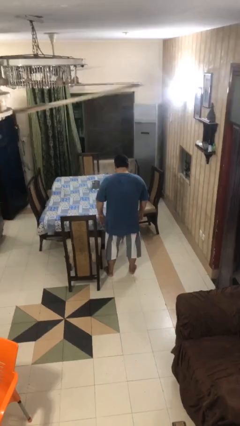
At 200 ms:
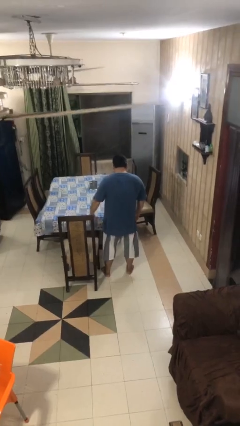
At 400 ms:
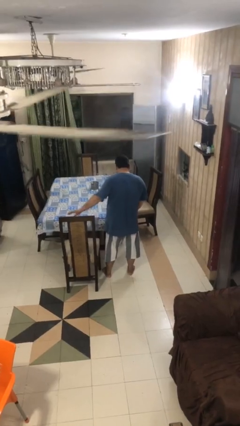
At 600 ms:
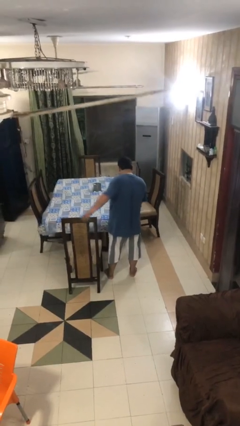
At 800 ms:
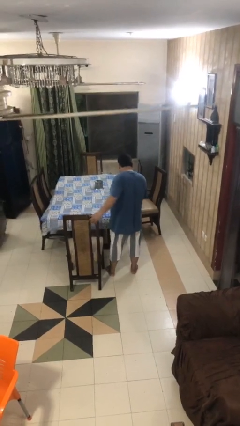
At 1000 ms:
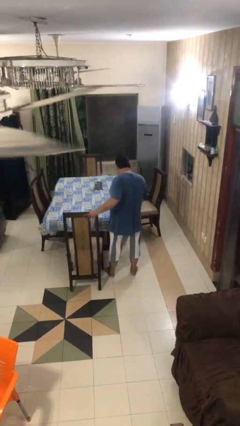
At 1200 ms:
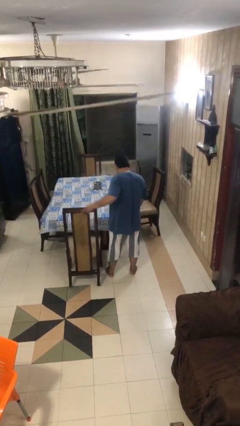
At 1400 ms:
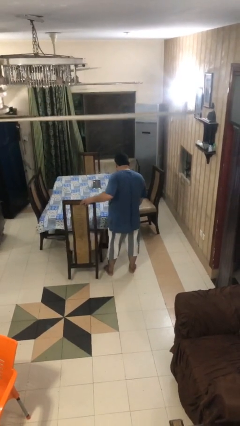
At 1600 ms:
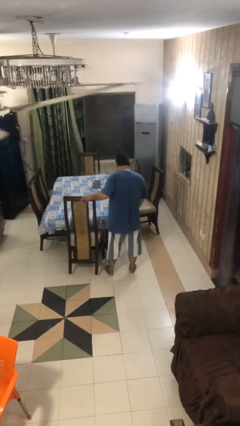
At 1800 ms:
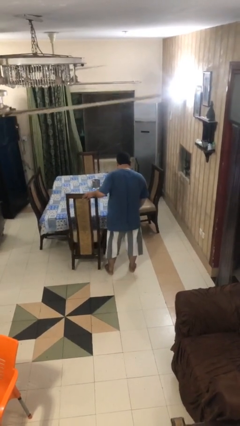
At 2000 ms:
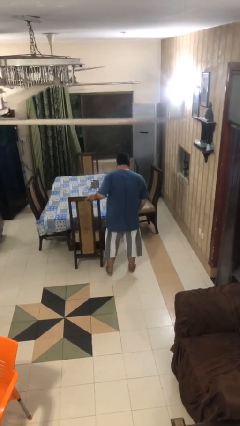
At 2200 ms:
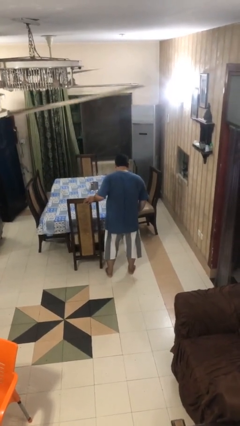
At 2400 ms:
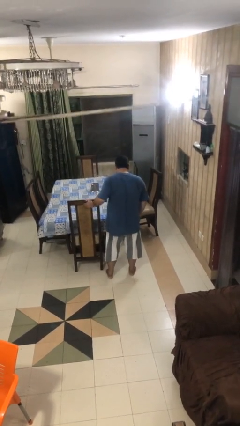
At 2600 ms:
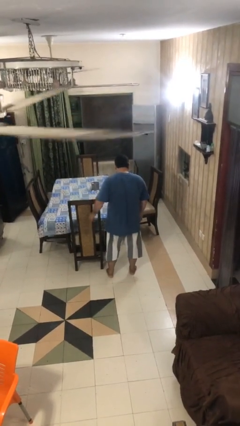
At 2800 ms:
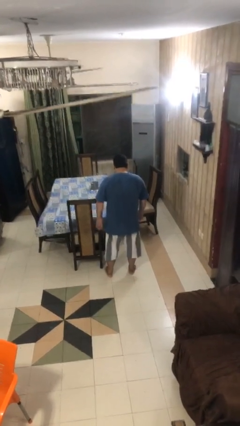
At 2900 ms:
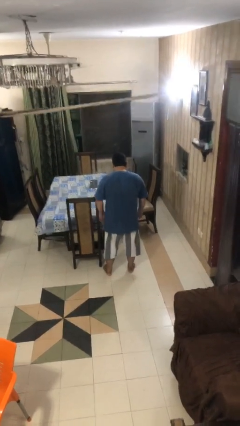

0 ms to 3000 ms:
person pushes in chair

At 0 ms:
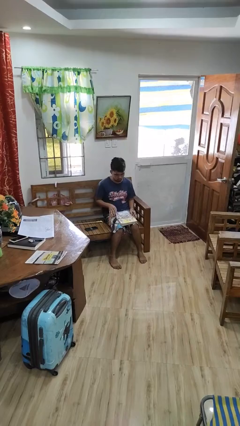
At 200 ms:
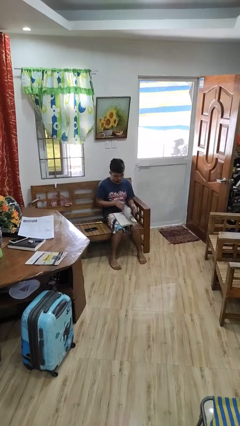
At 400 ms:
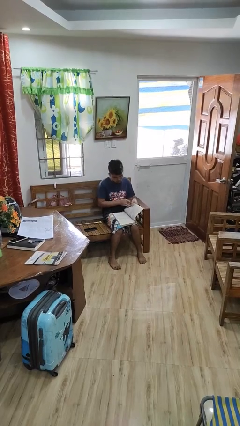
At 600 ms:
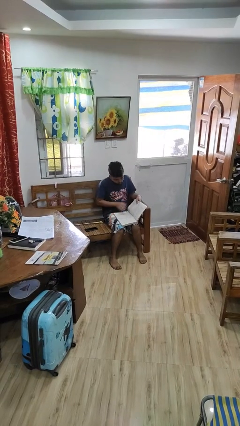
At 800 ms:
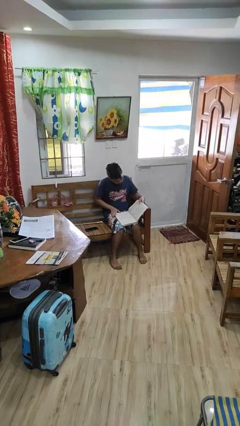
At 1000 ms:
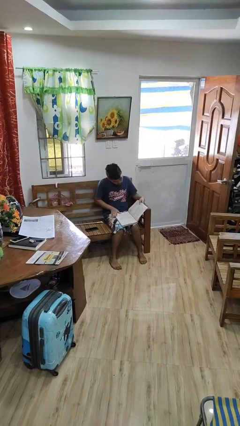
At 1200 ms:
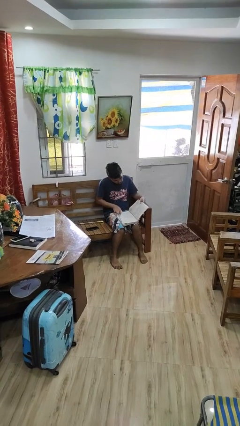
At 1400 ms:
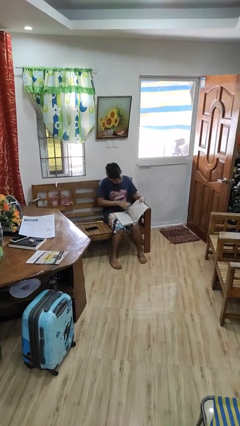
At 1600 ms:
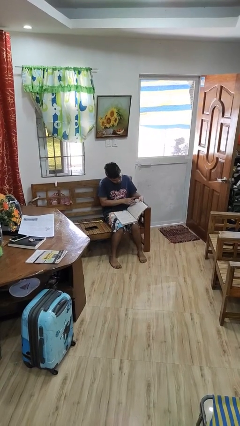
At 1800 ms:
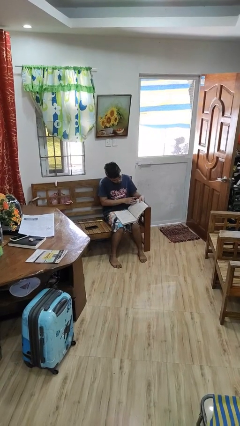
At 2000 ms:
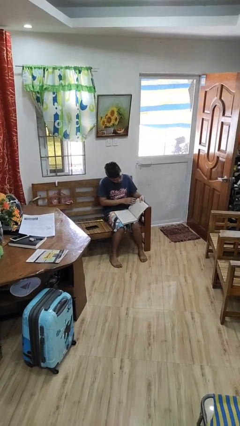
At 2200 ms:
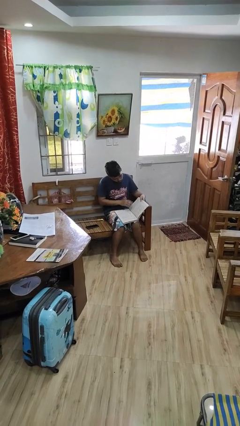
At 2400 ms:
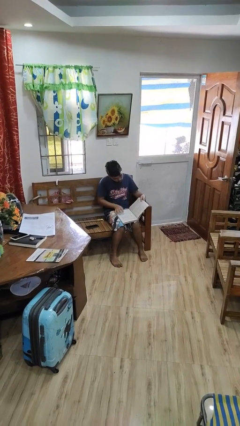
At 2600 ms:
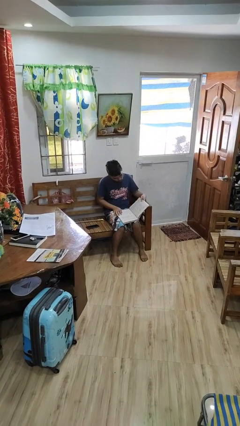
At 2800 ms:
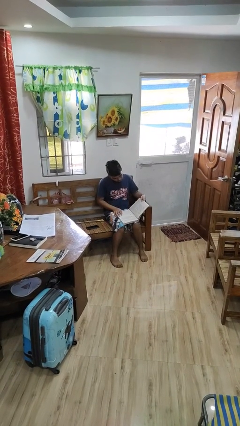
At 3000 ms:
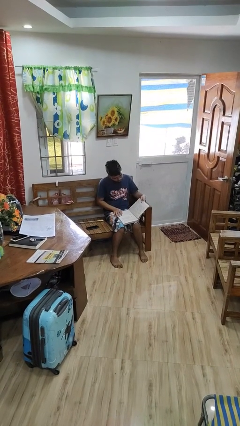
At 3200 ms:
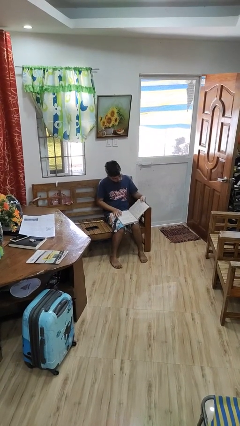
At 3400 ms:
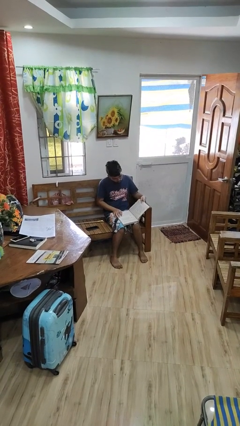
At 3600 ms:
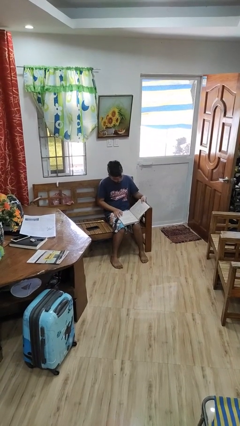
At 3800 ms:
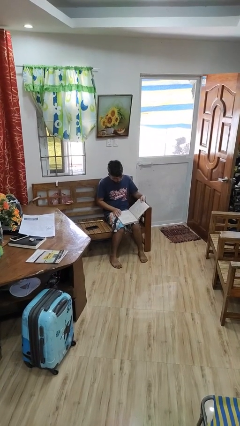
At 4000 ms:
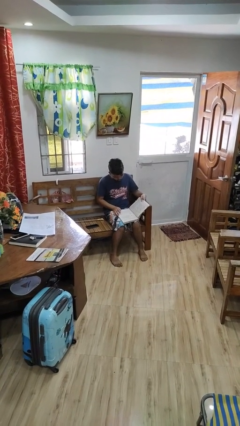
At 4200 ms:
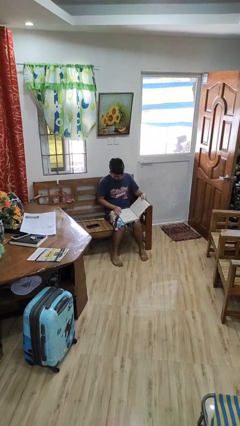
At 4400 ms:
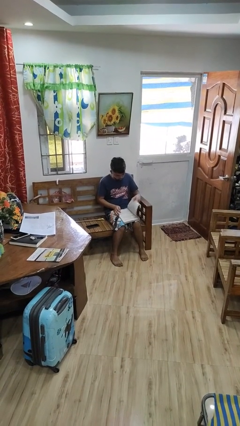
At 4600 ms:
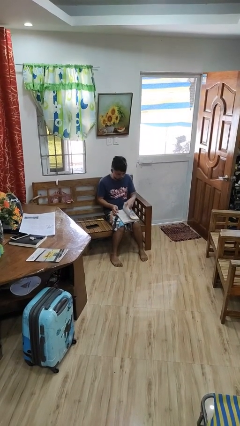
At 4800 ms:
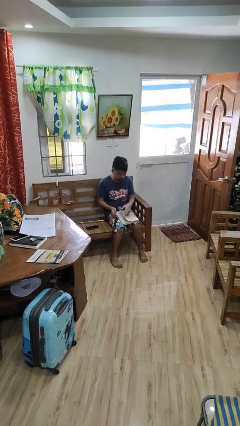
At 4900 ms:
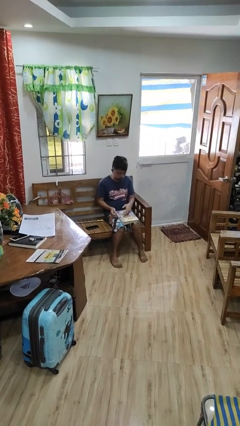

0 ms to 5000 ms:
person reads book

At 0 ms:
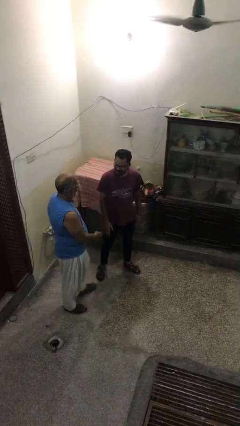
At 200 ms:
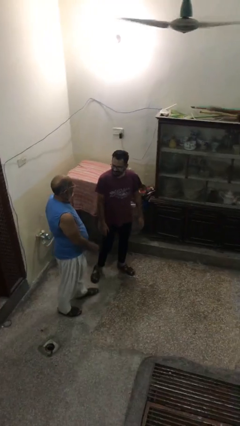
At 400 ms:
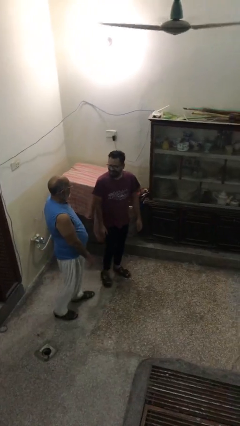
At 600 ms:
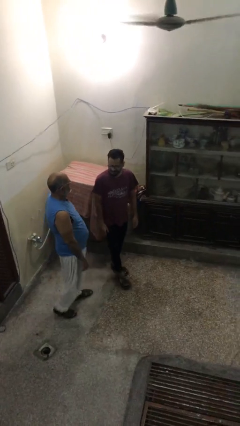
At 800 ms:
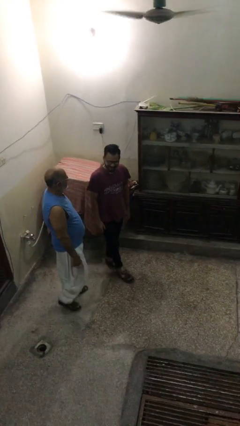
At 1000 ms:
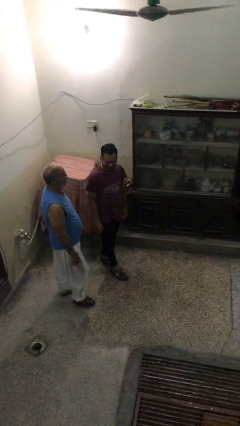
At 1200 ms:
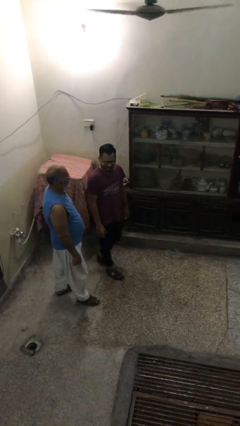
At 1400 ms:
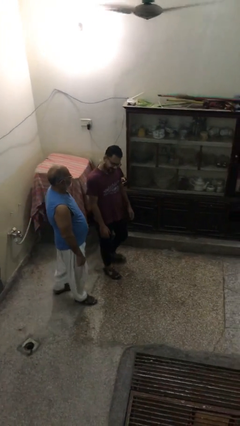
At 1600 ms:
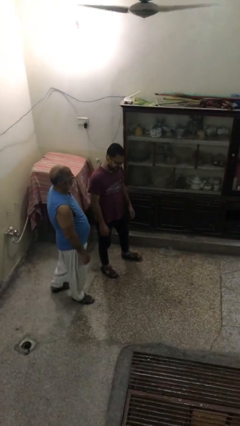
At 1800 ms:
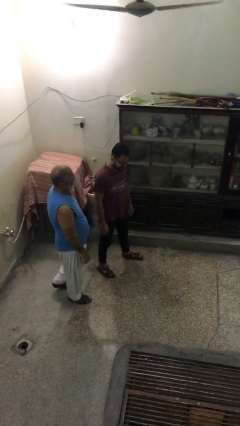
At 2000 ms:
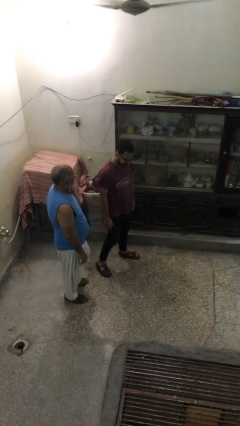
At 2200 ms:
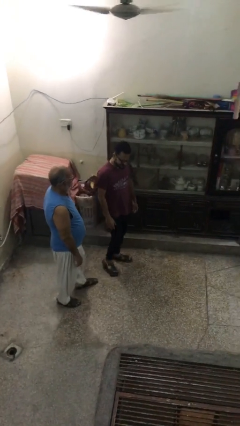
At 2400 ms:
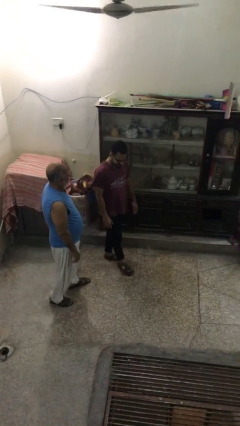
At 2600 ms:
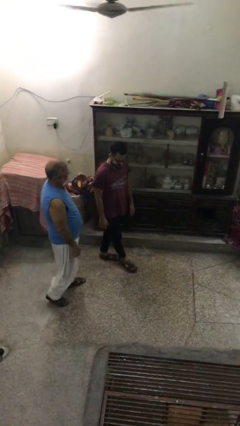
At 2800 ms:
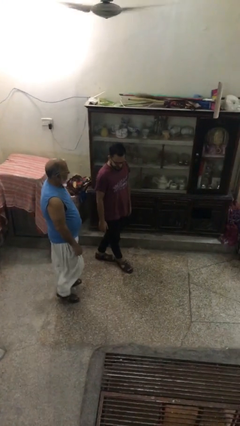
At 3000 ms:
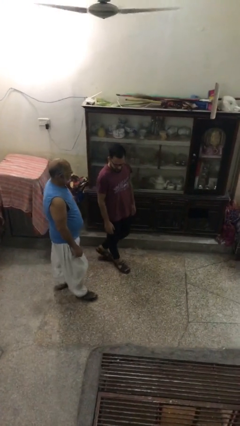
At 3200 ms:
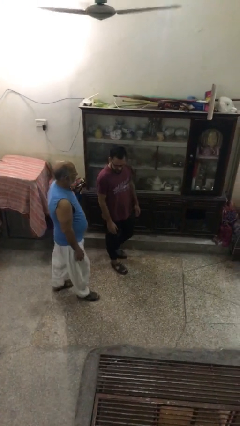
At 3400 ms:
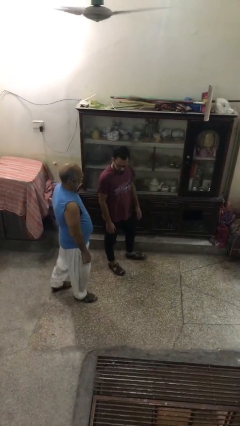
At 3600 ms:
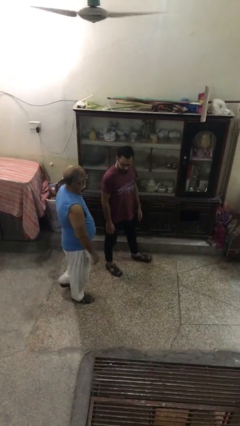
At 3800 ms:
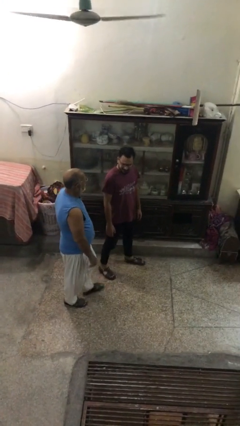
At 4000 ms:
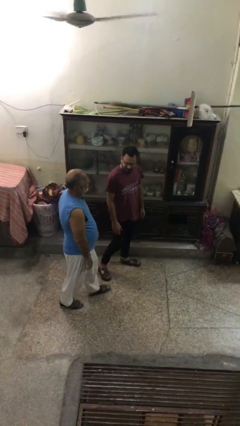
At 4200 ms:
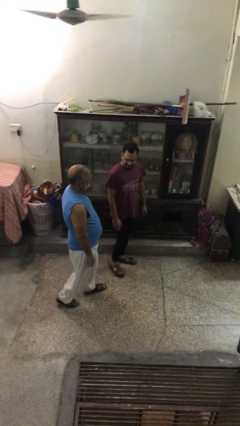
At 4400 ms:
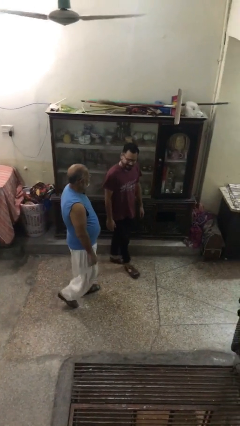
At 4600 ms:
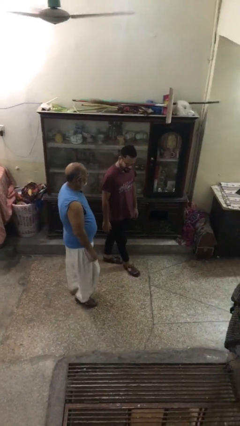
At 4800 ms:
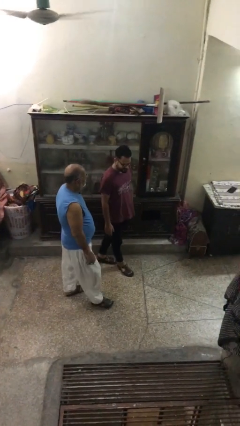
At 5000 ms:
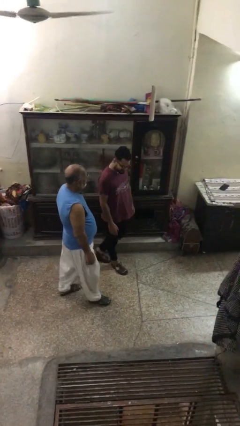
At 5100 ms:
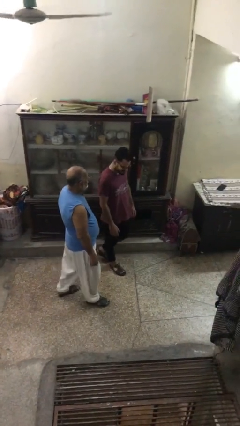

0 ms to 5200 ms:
person talks to person

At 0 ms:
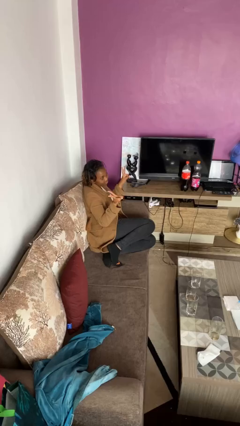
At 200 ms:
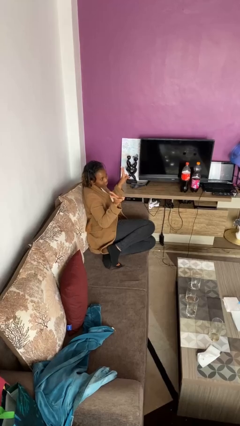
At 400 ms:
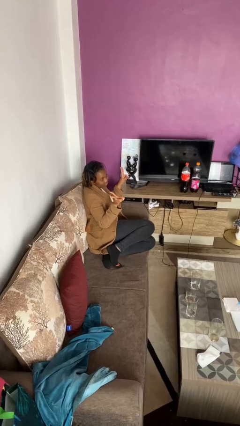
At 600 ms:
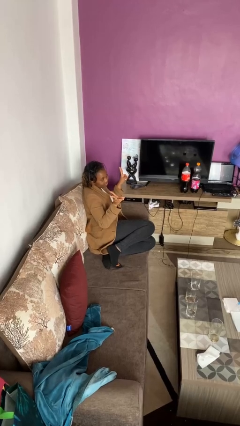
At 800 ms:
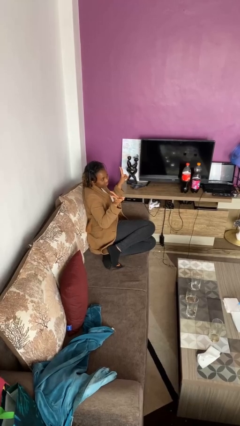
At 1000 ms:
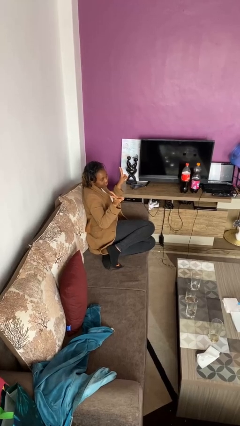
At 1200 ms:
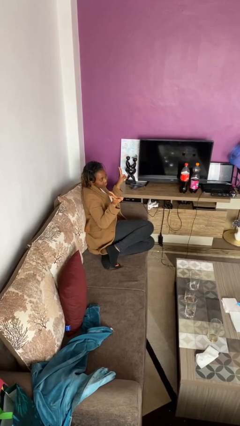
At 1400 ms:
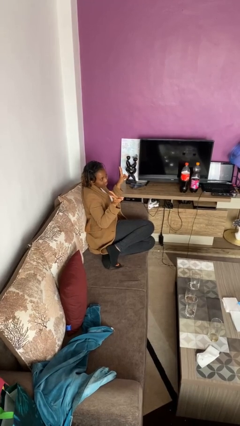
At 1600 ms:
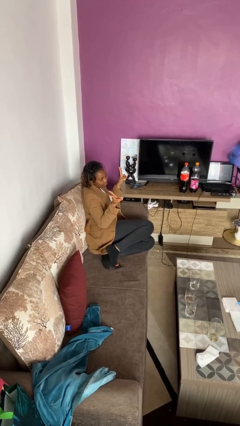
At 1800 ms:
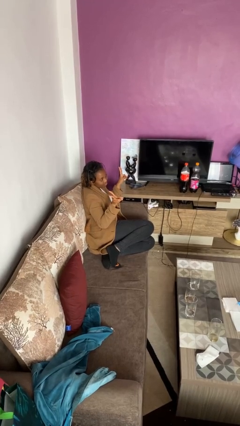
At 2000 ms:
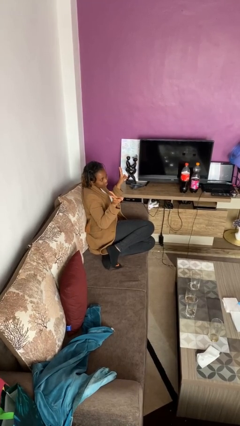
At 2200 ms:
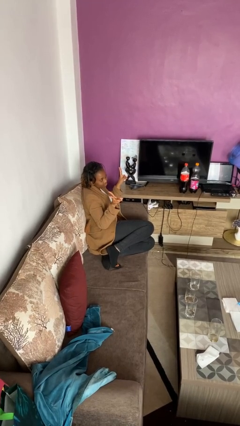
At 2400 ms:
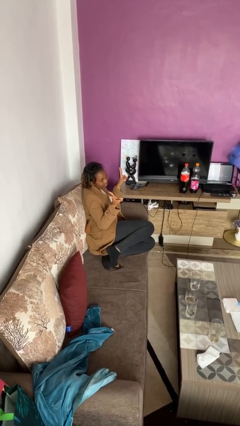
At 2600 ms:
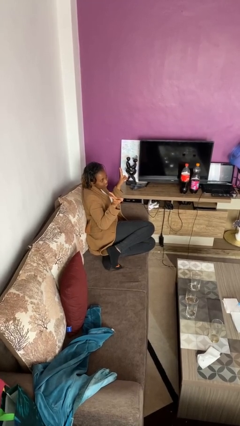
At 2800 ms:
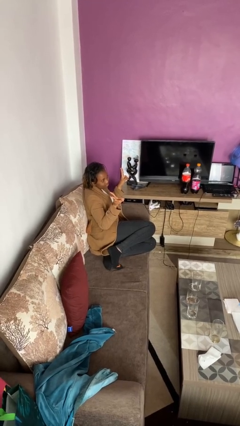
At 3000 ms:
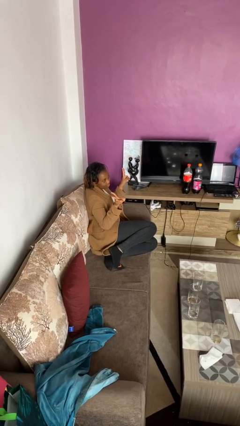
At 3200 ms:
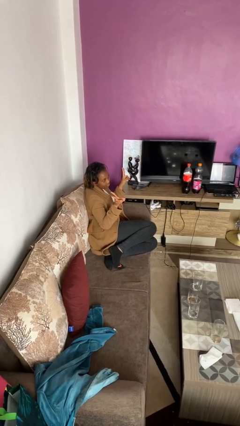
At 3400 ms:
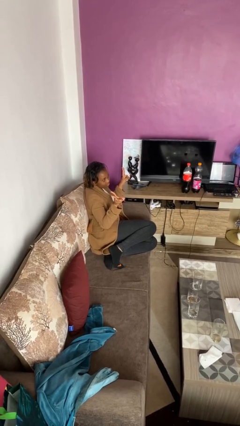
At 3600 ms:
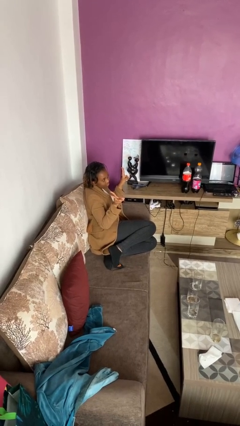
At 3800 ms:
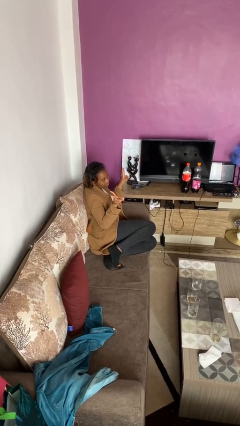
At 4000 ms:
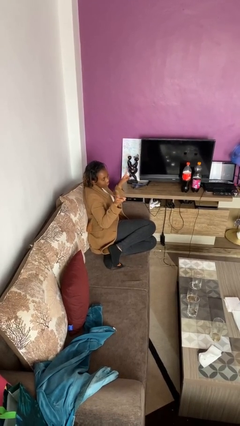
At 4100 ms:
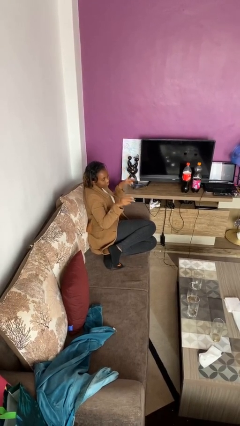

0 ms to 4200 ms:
person gestures peace

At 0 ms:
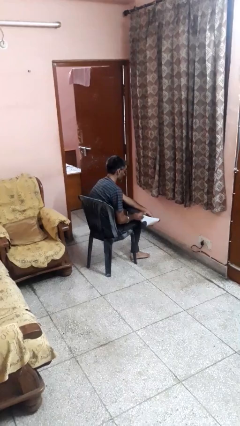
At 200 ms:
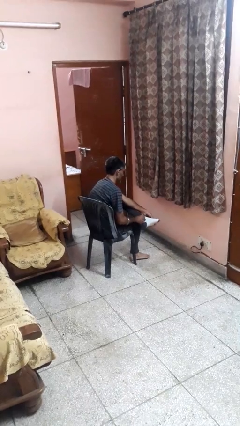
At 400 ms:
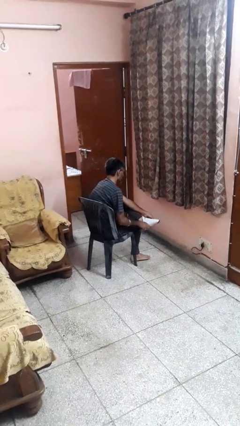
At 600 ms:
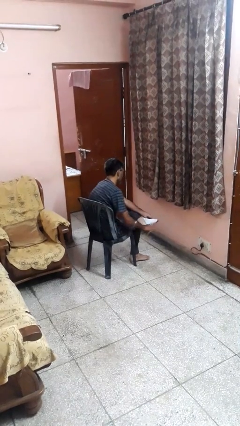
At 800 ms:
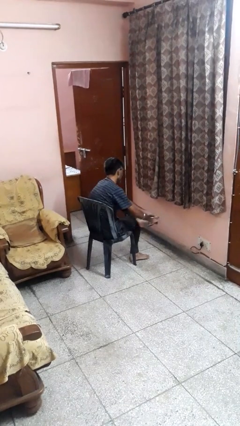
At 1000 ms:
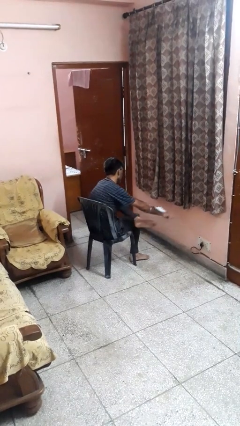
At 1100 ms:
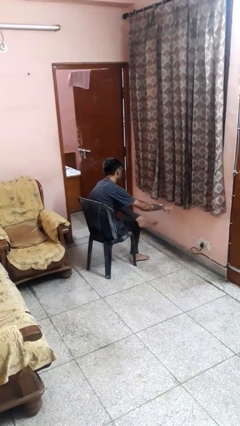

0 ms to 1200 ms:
person takes off socks
